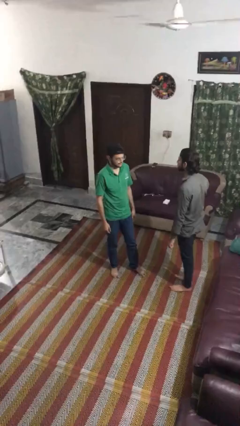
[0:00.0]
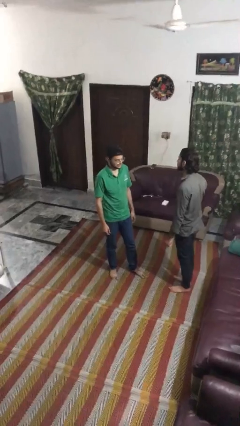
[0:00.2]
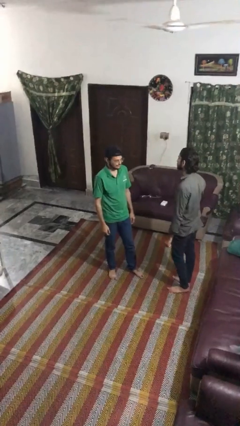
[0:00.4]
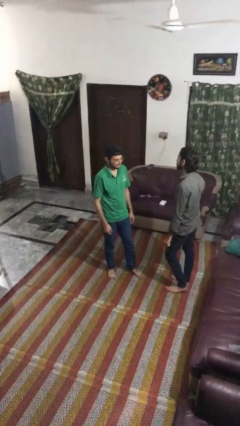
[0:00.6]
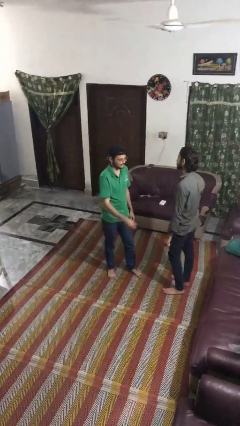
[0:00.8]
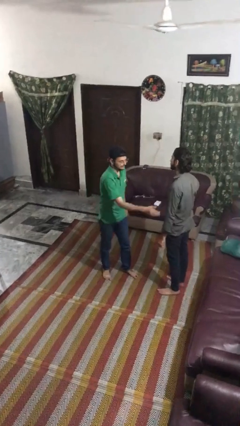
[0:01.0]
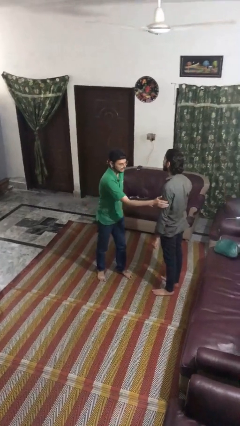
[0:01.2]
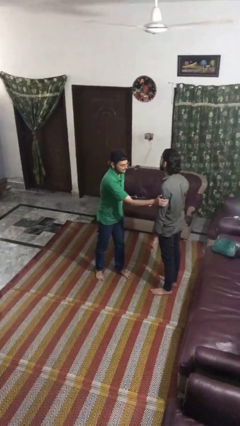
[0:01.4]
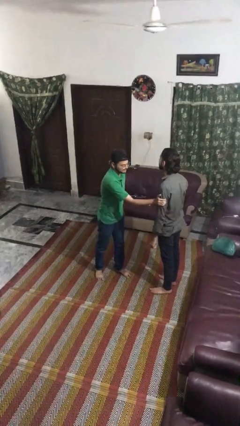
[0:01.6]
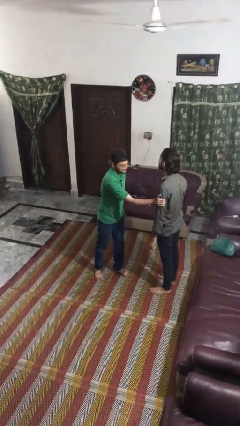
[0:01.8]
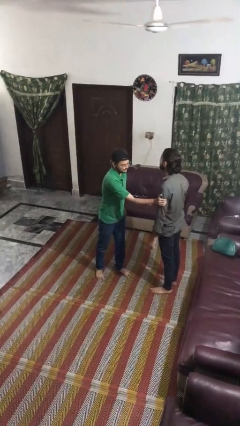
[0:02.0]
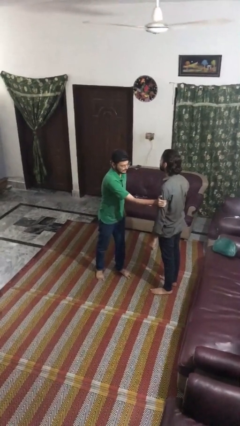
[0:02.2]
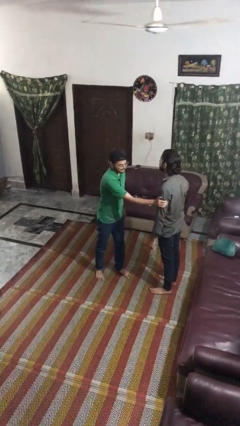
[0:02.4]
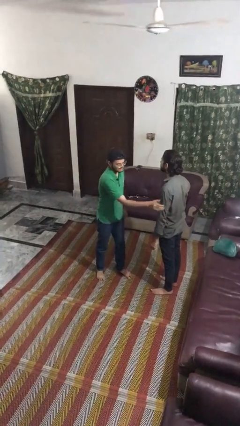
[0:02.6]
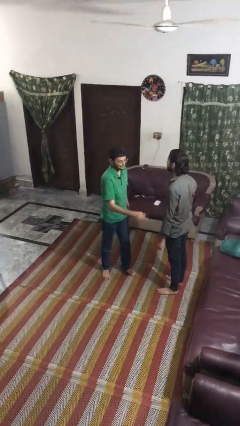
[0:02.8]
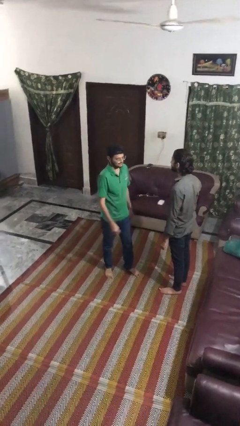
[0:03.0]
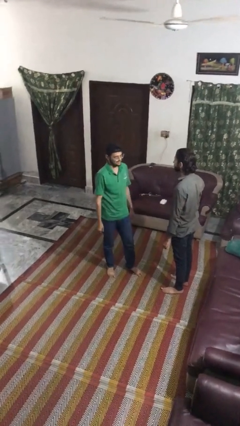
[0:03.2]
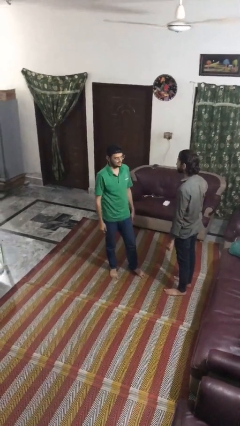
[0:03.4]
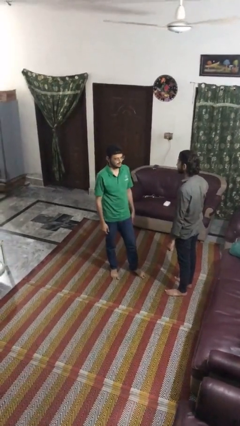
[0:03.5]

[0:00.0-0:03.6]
person grabs person by hair

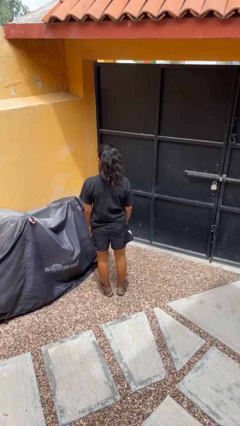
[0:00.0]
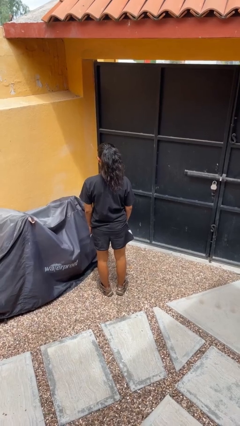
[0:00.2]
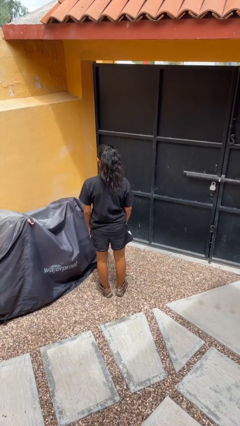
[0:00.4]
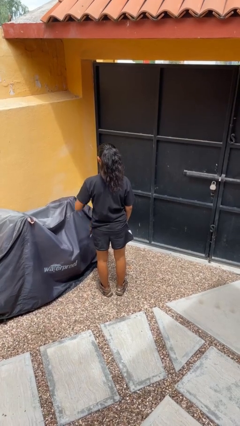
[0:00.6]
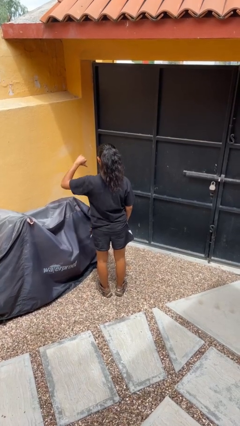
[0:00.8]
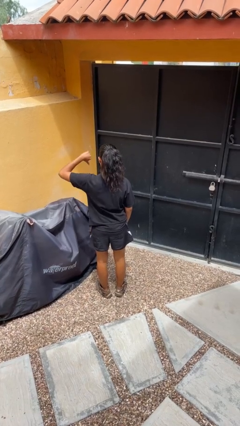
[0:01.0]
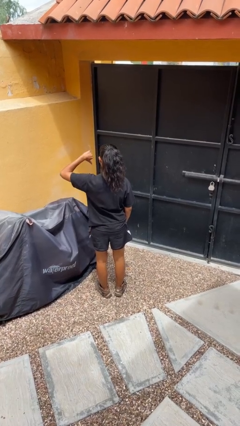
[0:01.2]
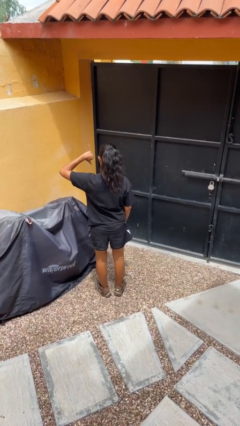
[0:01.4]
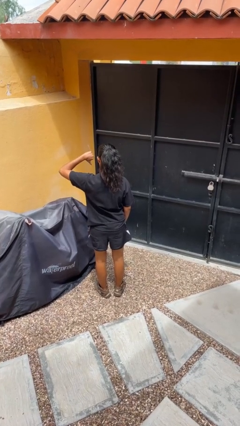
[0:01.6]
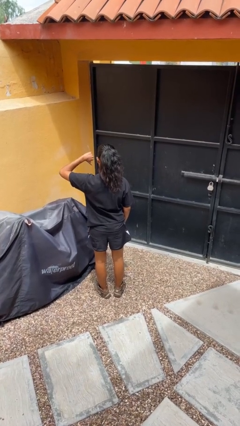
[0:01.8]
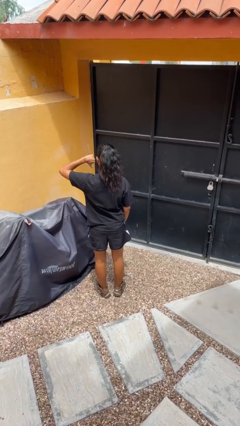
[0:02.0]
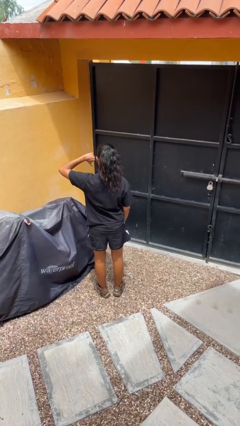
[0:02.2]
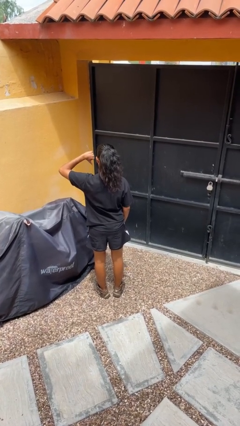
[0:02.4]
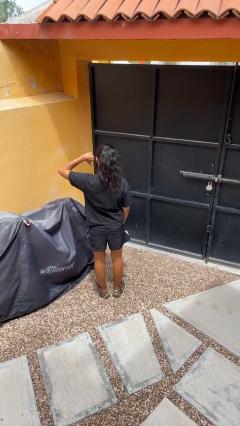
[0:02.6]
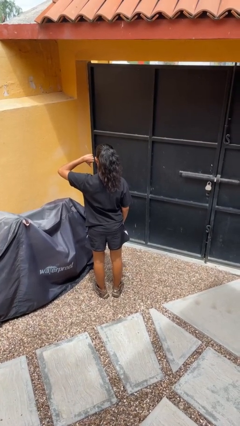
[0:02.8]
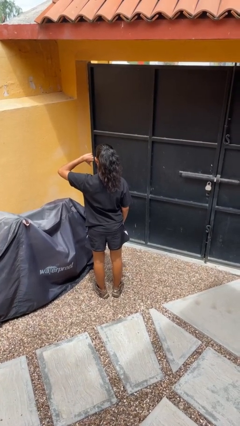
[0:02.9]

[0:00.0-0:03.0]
person gestures thumbs down

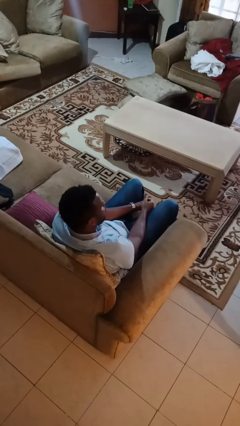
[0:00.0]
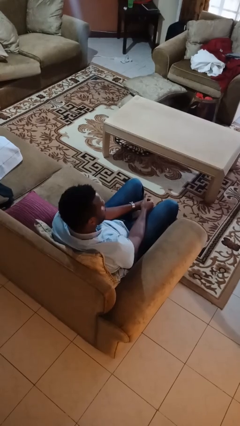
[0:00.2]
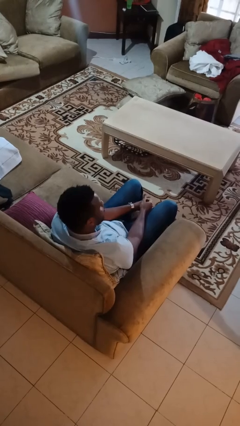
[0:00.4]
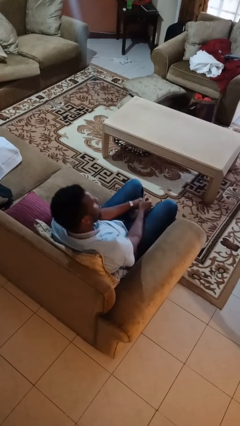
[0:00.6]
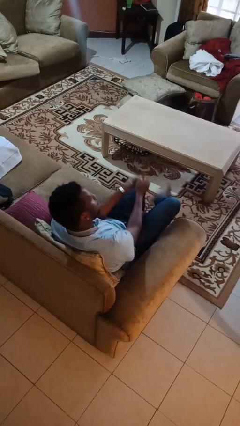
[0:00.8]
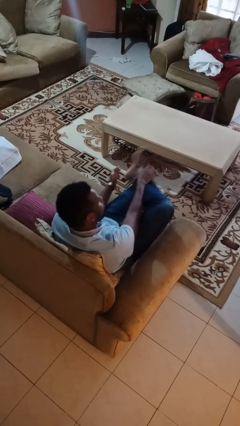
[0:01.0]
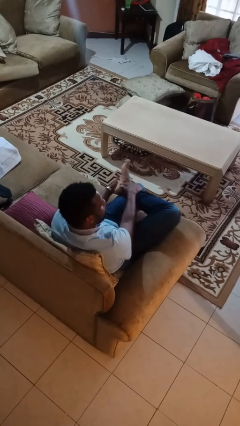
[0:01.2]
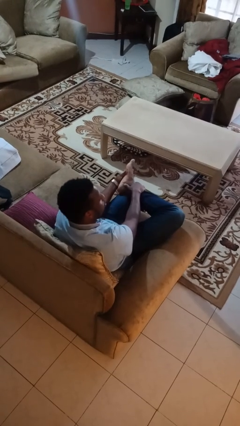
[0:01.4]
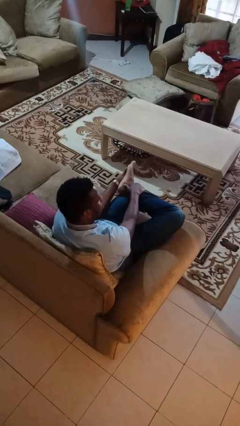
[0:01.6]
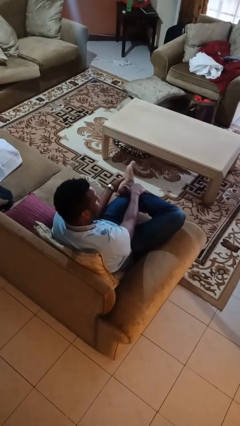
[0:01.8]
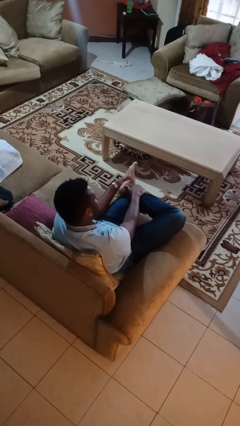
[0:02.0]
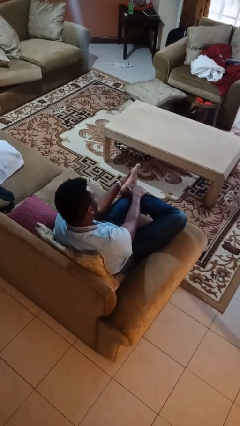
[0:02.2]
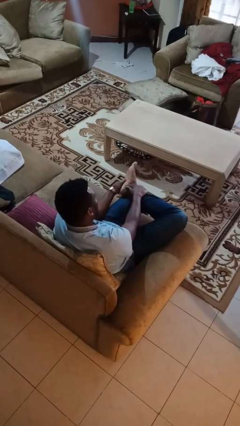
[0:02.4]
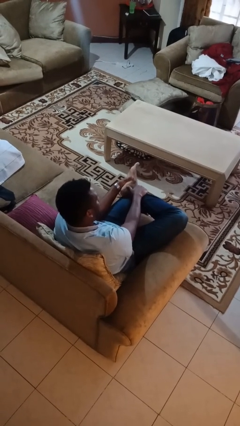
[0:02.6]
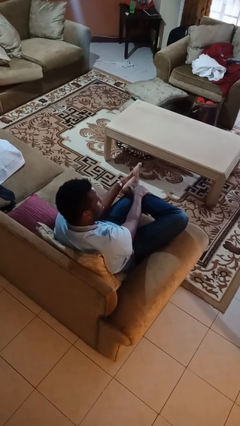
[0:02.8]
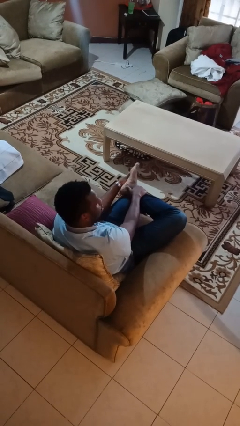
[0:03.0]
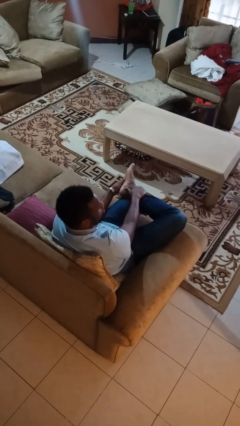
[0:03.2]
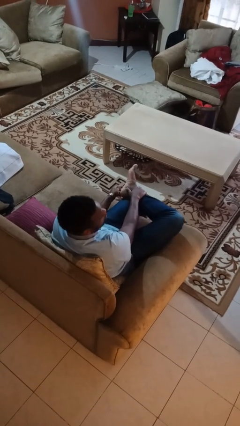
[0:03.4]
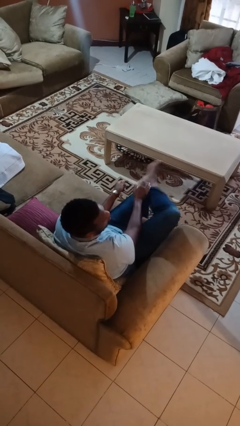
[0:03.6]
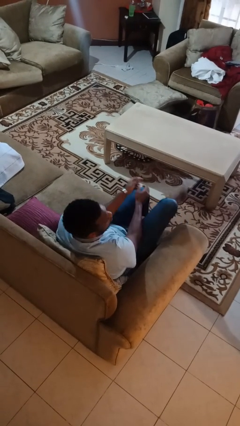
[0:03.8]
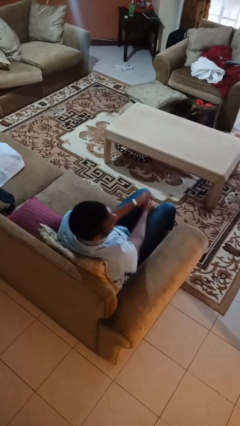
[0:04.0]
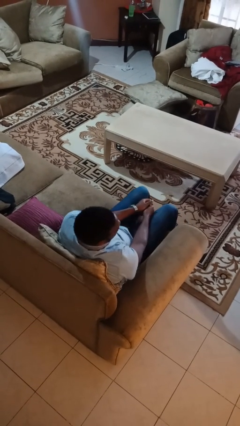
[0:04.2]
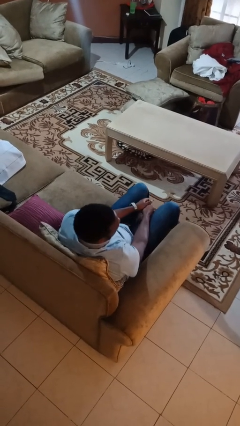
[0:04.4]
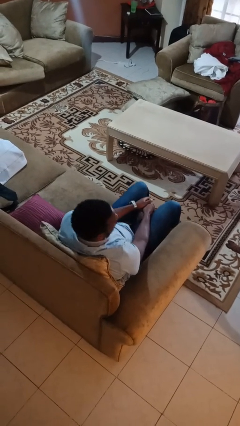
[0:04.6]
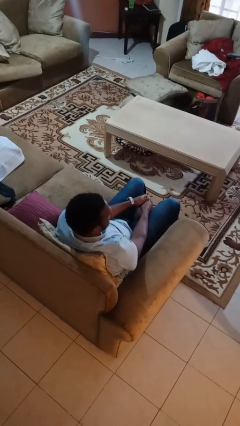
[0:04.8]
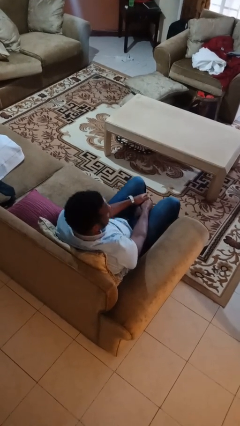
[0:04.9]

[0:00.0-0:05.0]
person rubs foot

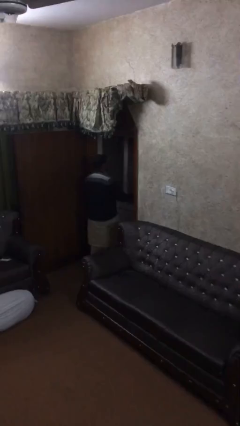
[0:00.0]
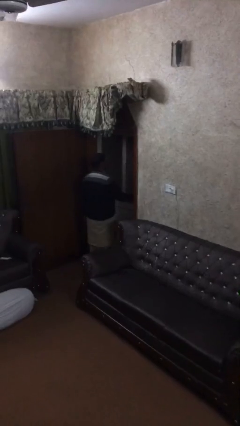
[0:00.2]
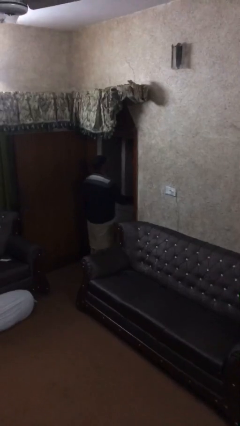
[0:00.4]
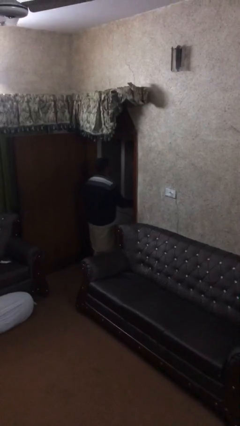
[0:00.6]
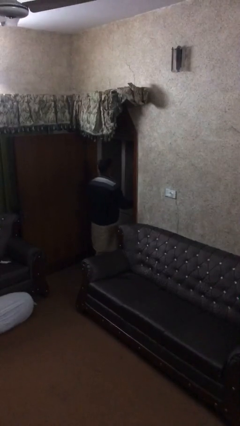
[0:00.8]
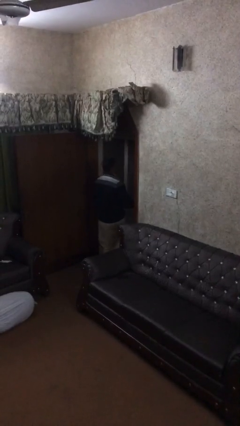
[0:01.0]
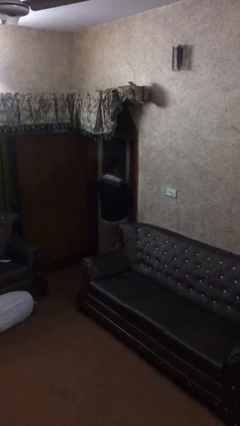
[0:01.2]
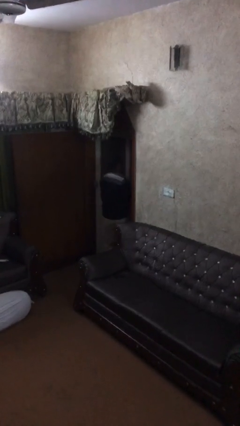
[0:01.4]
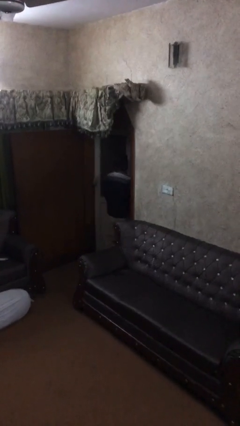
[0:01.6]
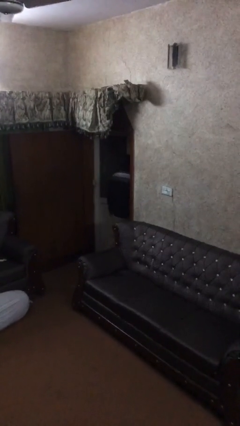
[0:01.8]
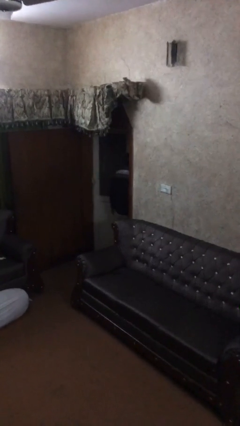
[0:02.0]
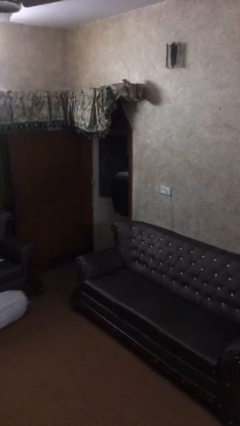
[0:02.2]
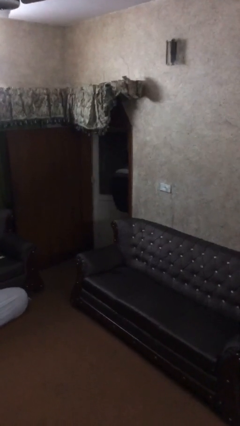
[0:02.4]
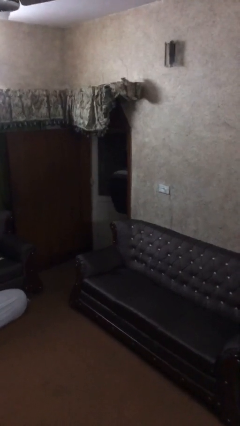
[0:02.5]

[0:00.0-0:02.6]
person closes facility door

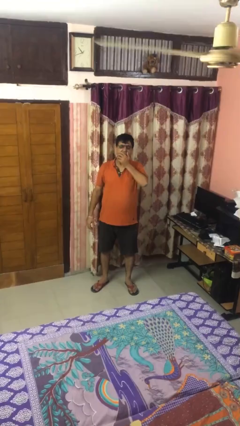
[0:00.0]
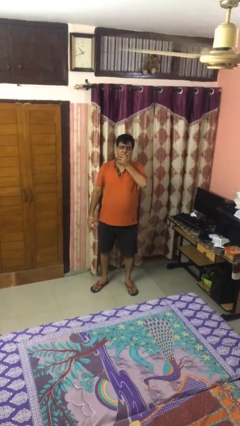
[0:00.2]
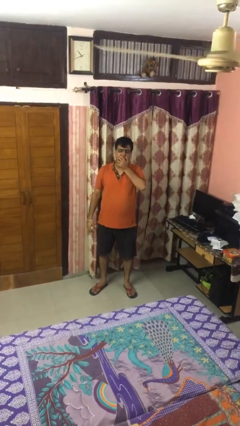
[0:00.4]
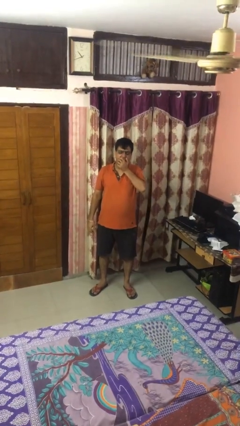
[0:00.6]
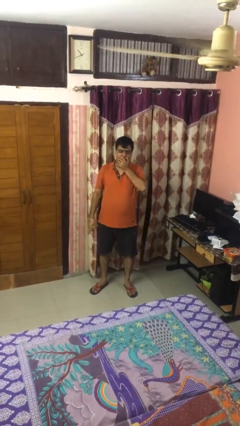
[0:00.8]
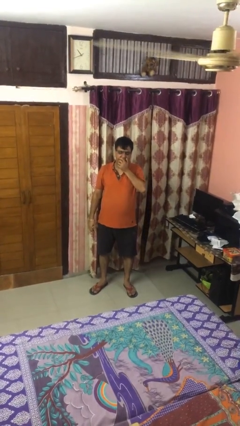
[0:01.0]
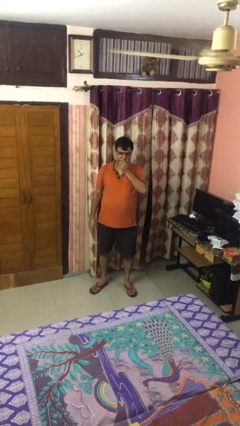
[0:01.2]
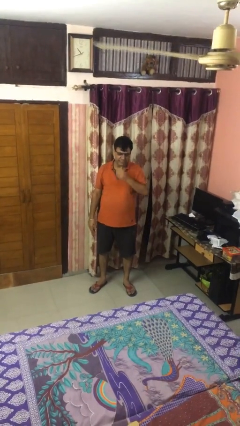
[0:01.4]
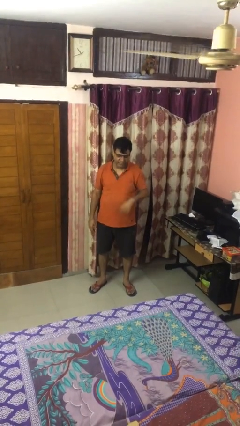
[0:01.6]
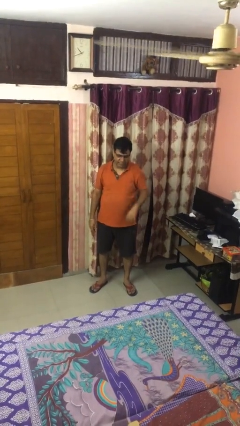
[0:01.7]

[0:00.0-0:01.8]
person yawns

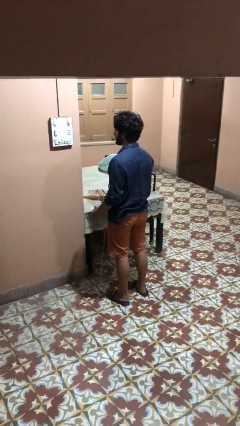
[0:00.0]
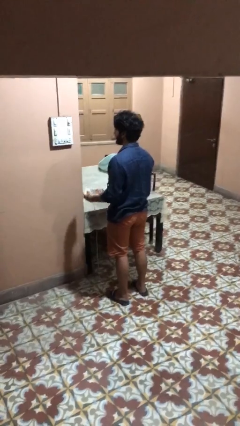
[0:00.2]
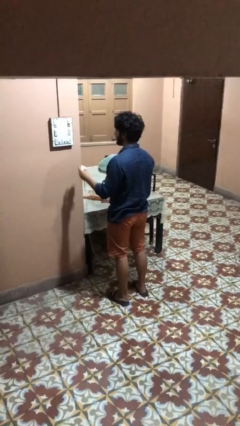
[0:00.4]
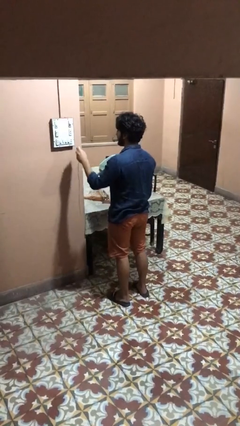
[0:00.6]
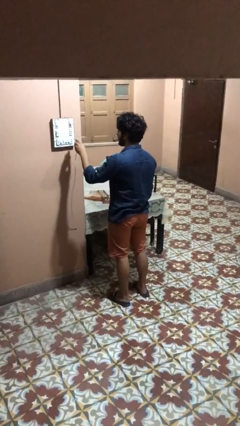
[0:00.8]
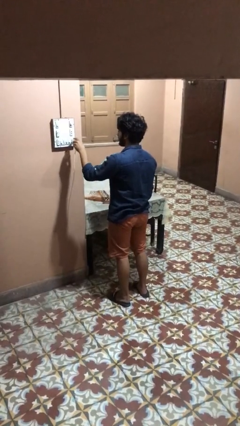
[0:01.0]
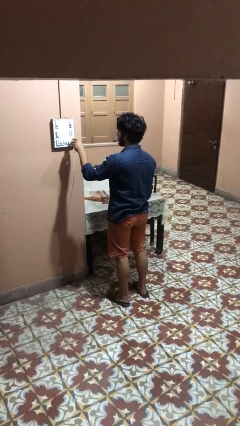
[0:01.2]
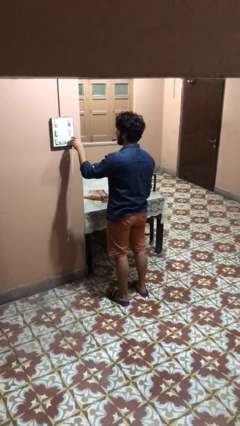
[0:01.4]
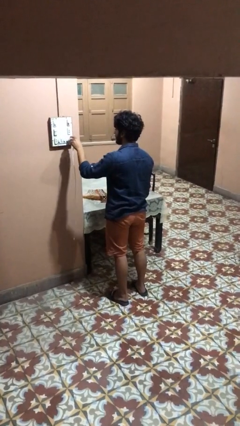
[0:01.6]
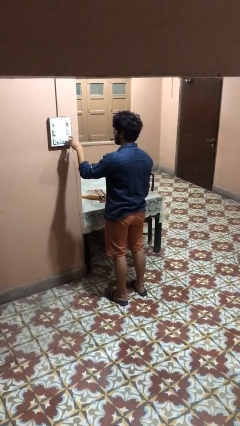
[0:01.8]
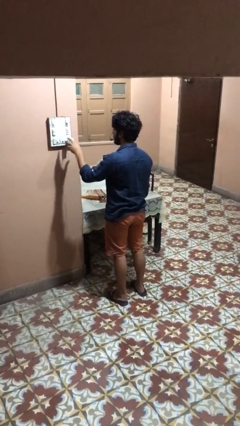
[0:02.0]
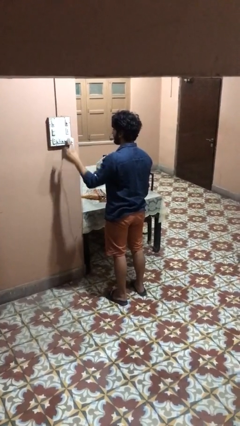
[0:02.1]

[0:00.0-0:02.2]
person plugs into electrical socket
